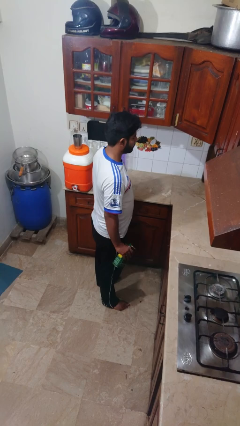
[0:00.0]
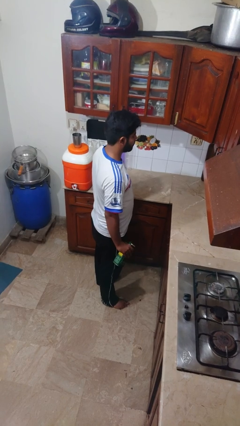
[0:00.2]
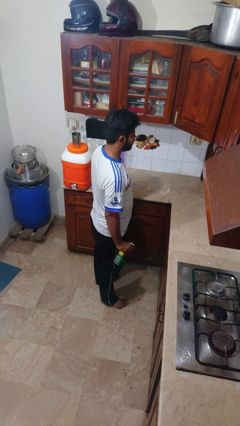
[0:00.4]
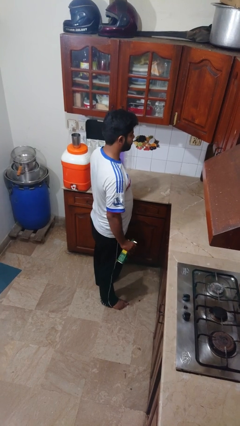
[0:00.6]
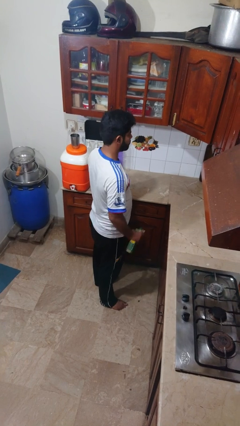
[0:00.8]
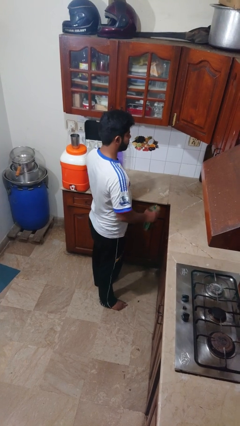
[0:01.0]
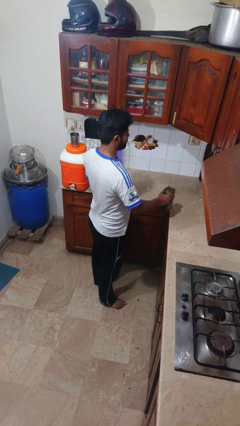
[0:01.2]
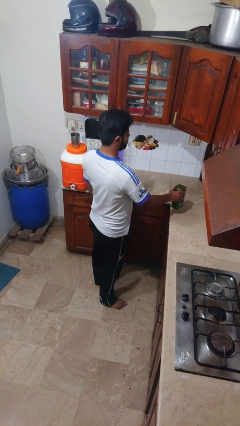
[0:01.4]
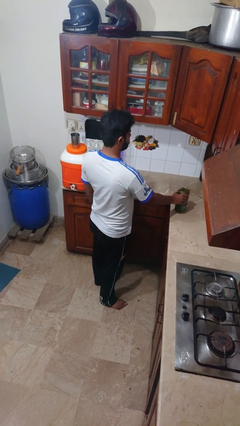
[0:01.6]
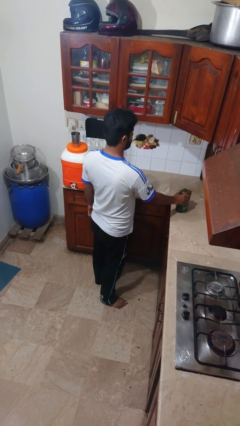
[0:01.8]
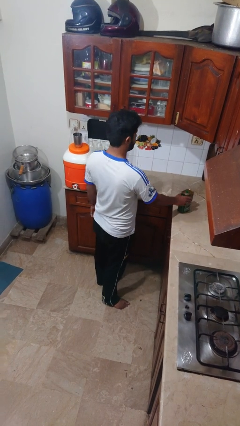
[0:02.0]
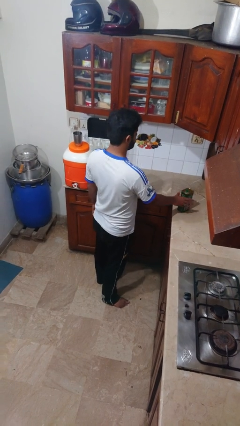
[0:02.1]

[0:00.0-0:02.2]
person puts down object on countertop

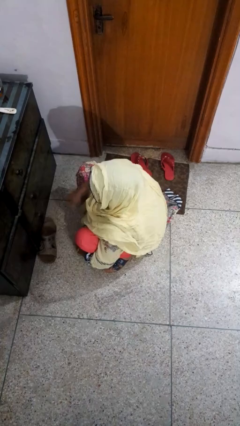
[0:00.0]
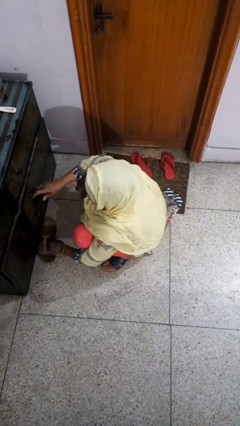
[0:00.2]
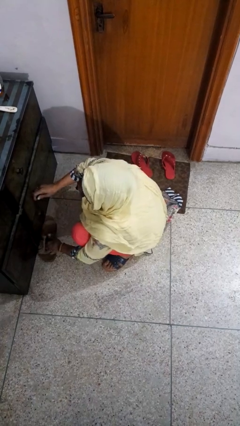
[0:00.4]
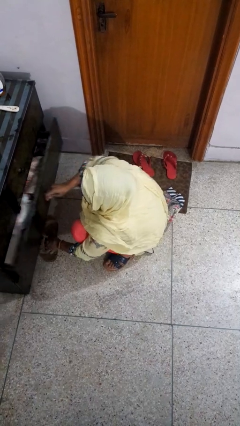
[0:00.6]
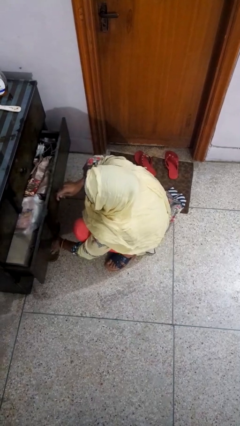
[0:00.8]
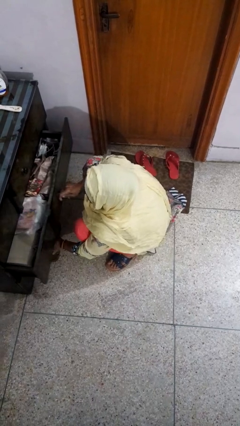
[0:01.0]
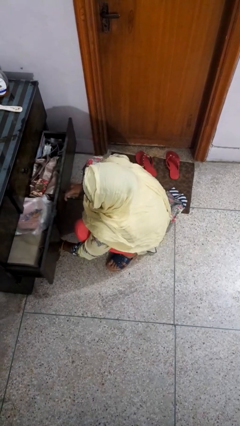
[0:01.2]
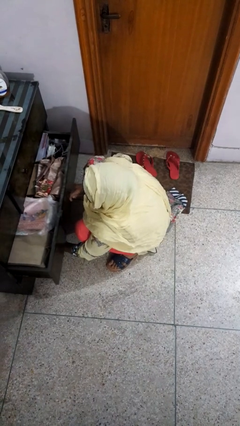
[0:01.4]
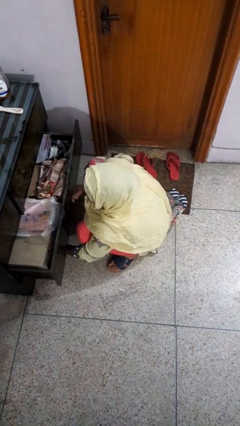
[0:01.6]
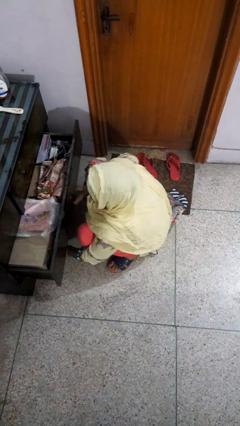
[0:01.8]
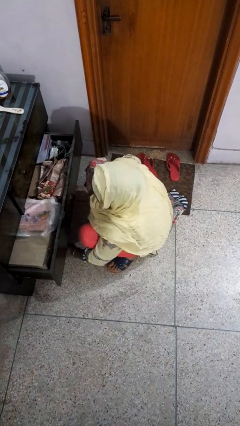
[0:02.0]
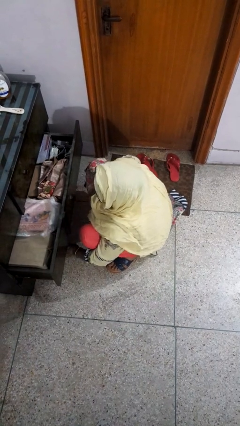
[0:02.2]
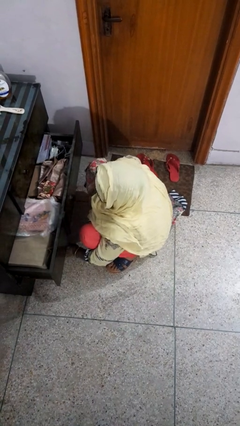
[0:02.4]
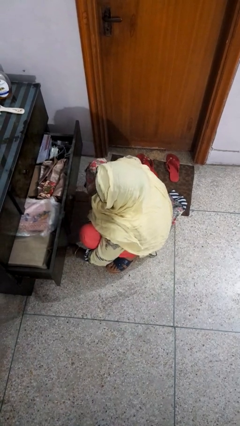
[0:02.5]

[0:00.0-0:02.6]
person opens dresser drawer

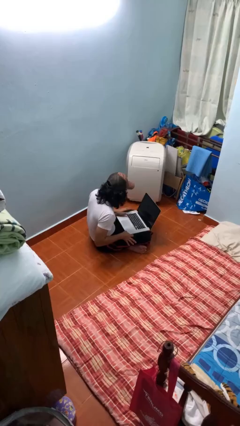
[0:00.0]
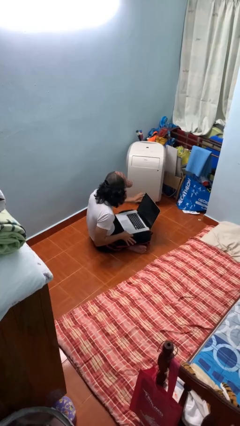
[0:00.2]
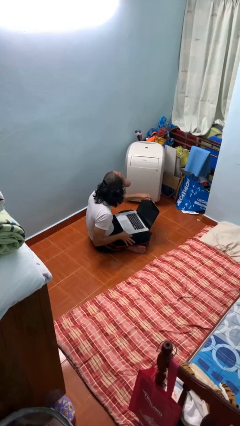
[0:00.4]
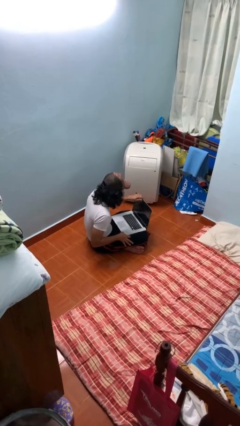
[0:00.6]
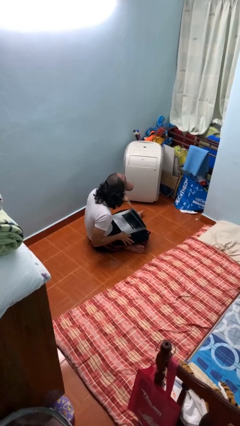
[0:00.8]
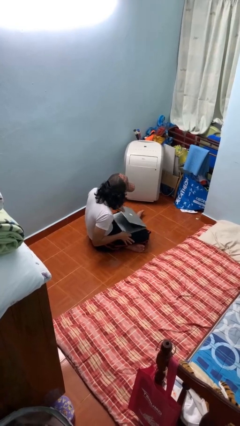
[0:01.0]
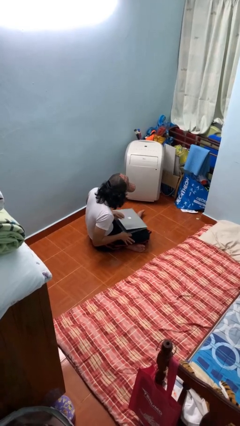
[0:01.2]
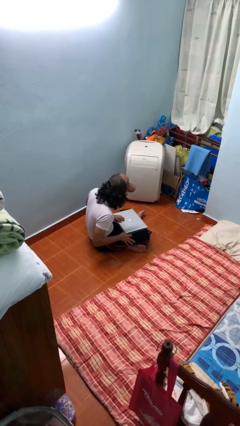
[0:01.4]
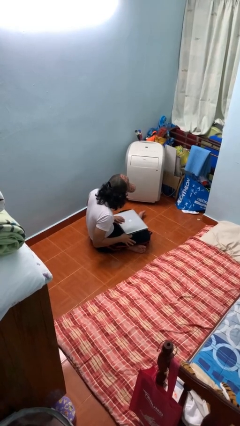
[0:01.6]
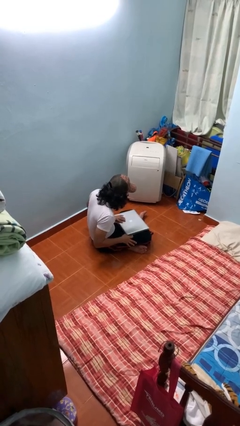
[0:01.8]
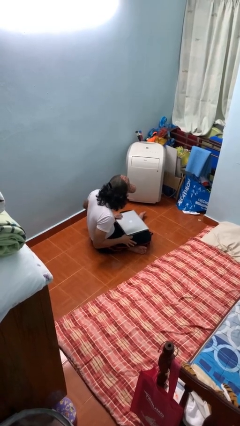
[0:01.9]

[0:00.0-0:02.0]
person closes laptop

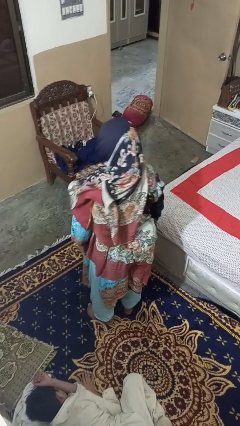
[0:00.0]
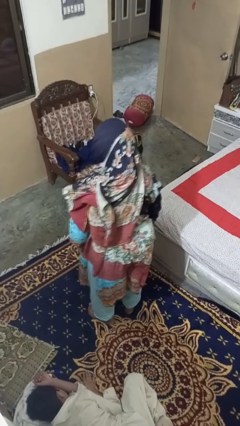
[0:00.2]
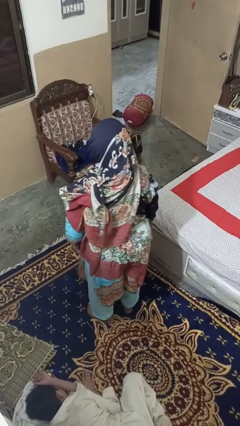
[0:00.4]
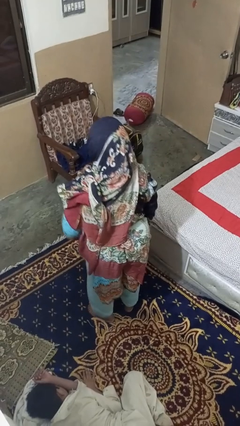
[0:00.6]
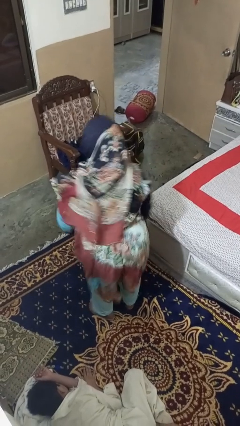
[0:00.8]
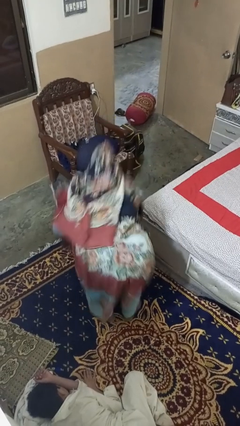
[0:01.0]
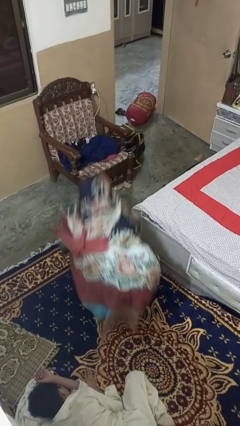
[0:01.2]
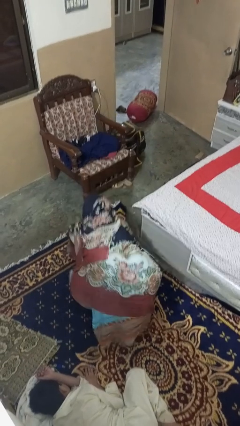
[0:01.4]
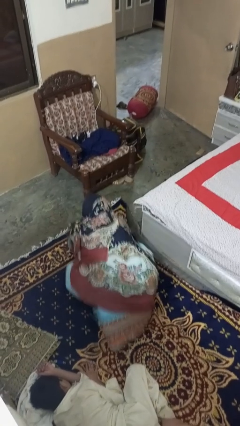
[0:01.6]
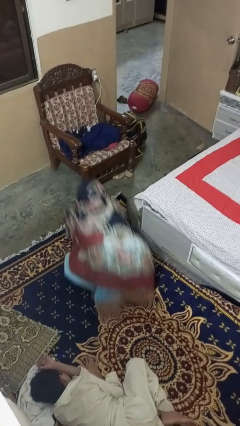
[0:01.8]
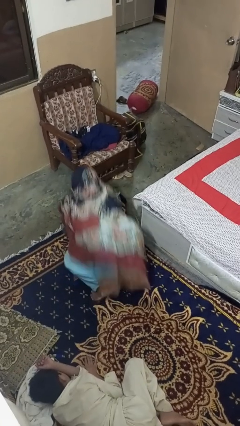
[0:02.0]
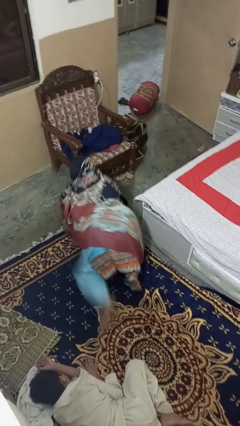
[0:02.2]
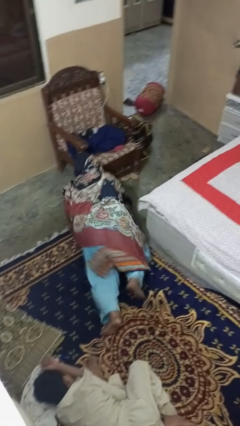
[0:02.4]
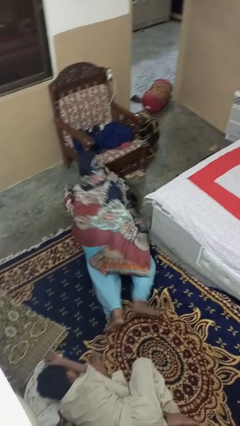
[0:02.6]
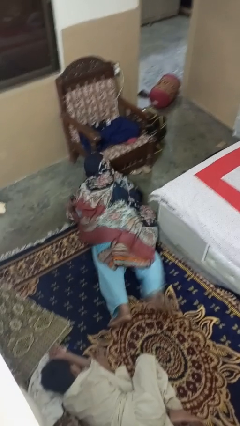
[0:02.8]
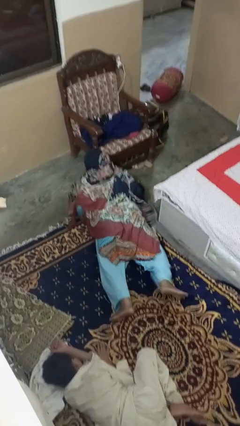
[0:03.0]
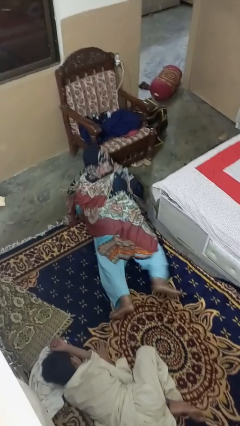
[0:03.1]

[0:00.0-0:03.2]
person exercises with pushup

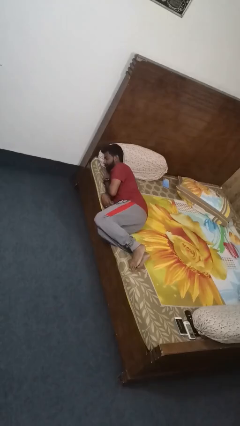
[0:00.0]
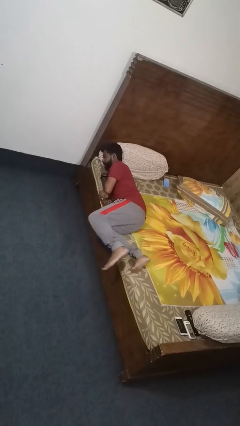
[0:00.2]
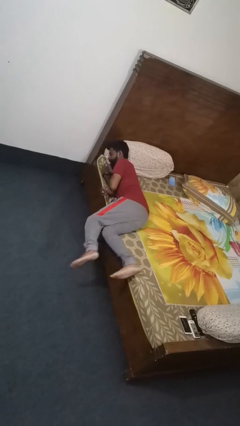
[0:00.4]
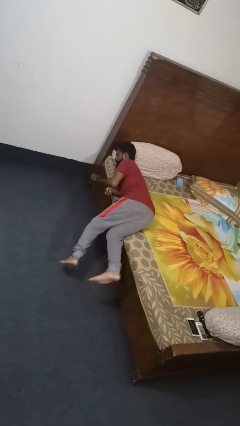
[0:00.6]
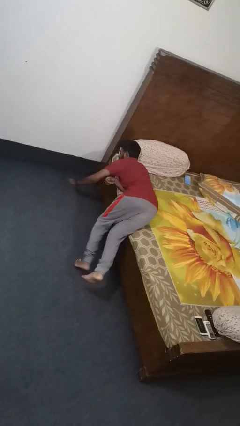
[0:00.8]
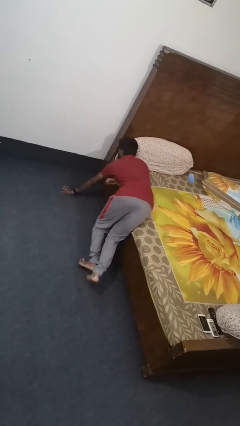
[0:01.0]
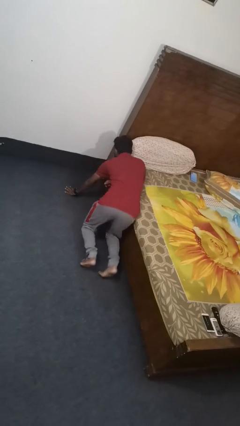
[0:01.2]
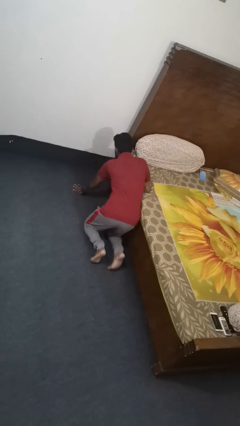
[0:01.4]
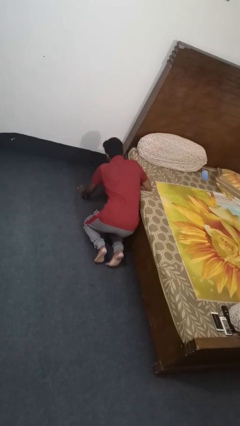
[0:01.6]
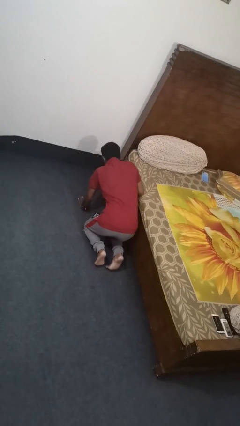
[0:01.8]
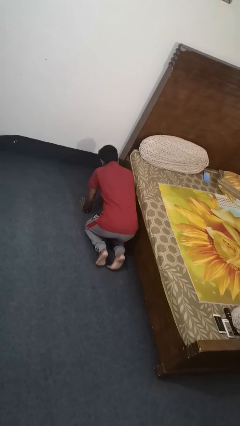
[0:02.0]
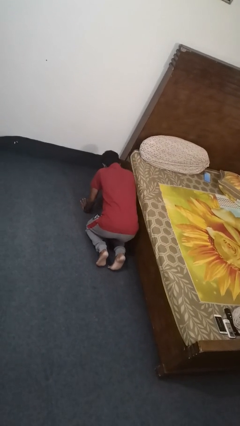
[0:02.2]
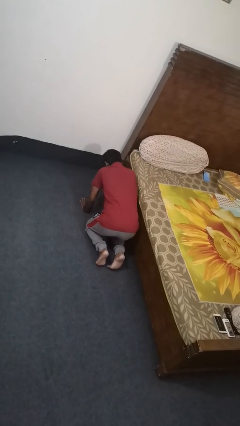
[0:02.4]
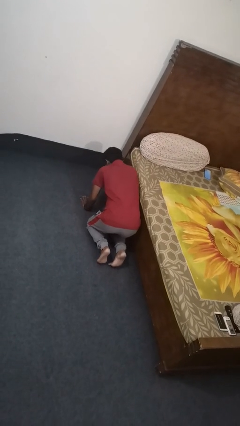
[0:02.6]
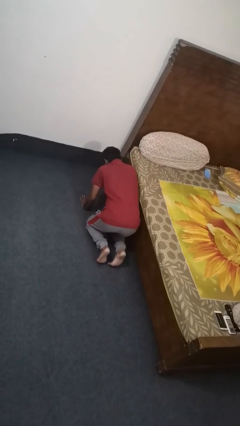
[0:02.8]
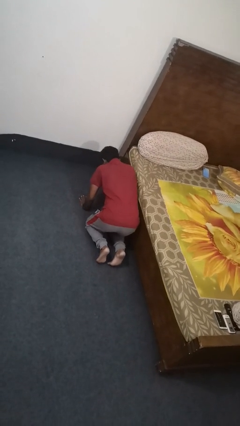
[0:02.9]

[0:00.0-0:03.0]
person falls from bed

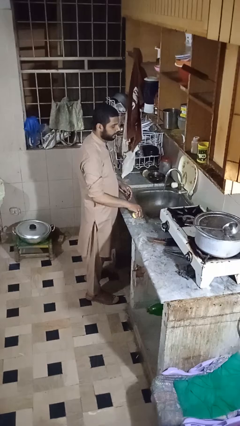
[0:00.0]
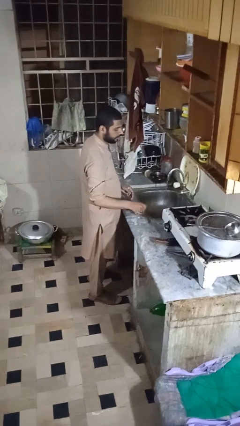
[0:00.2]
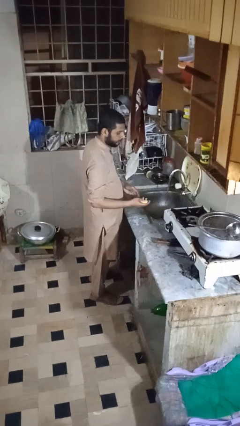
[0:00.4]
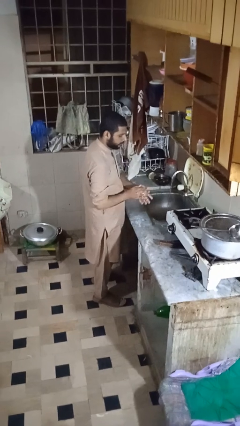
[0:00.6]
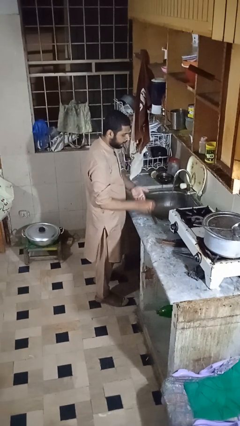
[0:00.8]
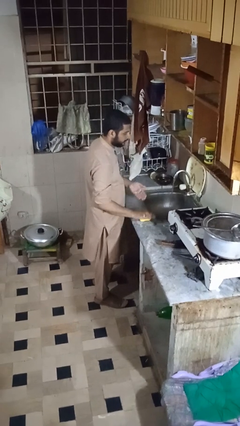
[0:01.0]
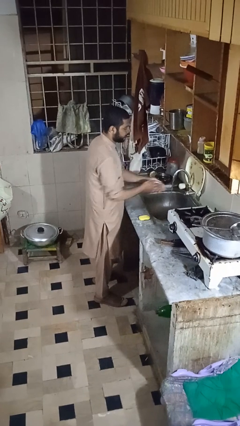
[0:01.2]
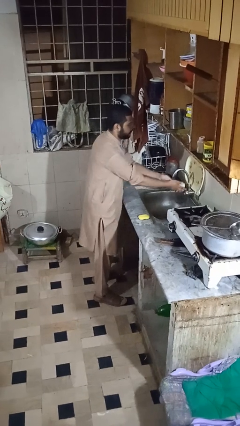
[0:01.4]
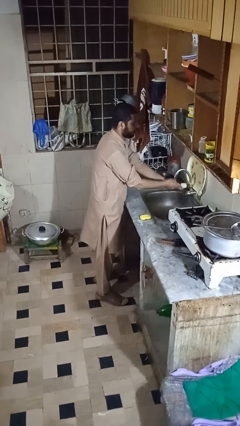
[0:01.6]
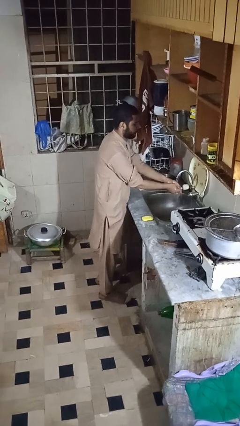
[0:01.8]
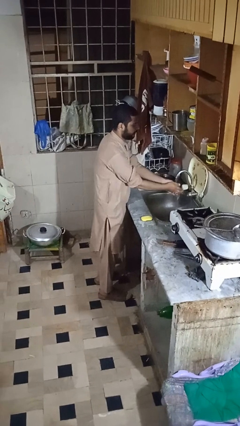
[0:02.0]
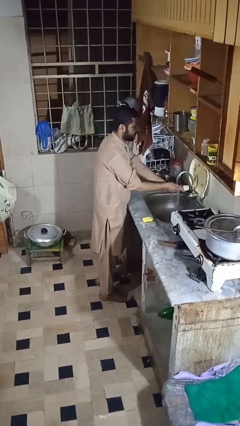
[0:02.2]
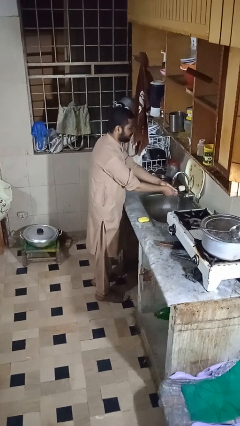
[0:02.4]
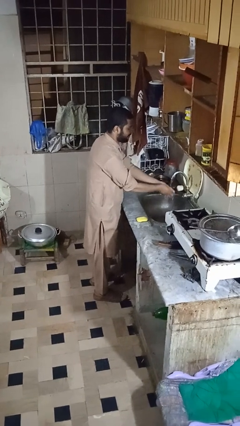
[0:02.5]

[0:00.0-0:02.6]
person washes hands

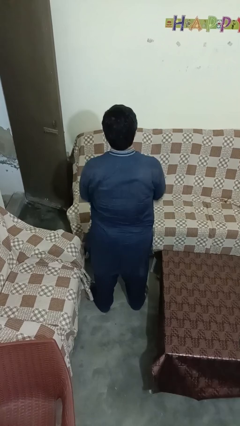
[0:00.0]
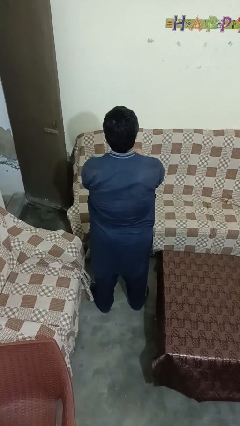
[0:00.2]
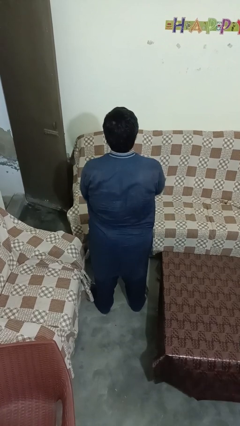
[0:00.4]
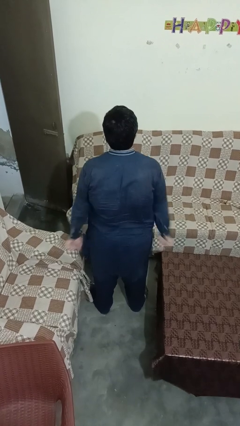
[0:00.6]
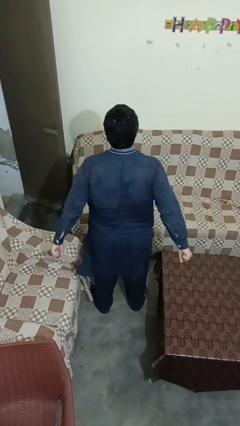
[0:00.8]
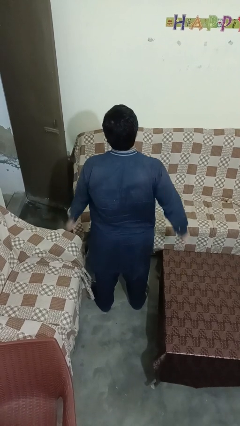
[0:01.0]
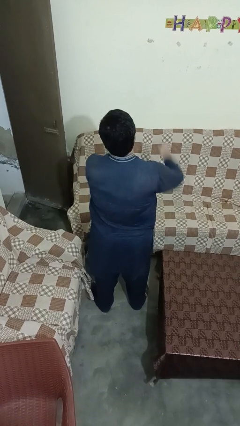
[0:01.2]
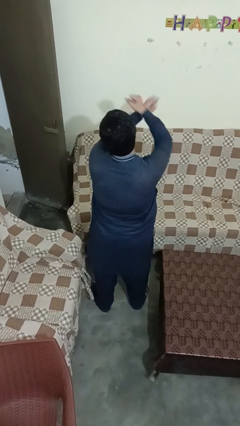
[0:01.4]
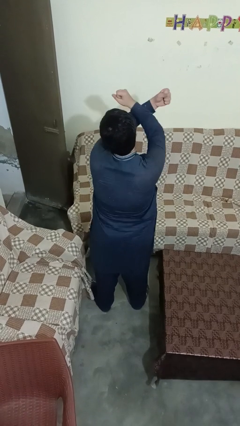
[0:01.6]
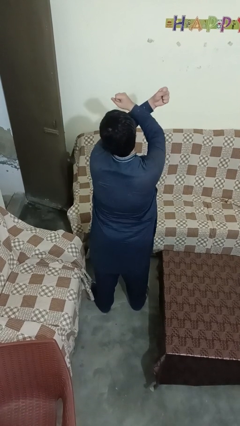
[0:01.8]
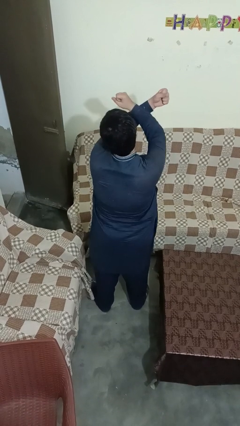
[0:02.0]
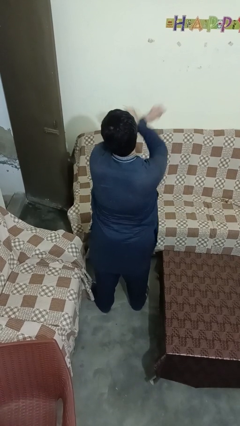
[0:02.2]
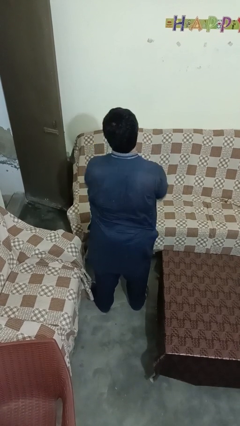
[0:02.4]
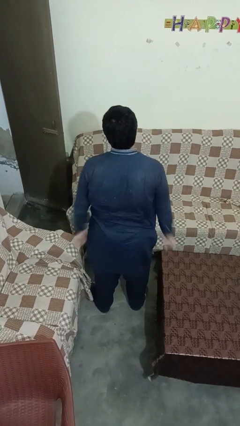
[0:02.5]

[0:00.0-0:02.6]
person gestures arms x
